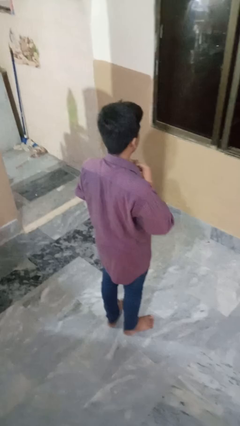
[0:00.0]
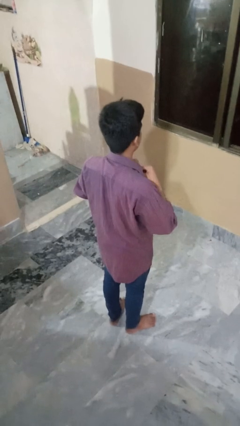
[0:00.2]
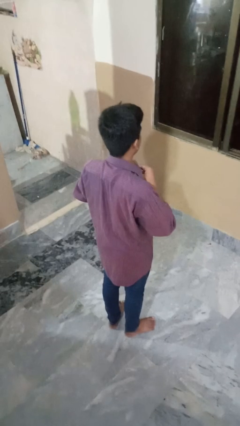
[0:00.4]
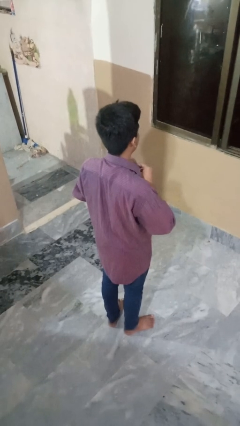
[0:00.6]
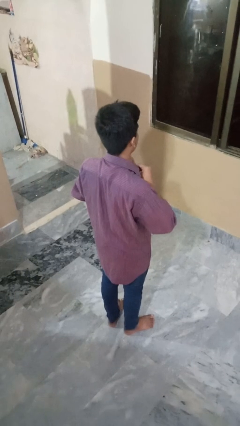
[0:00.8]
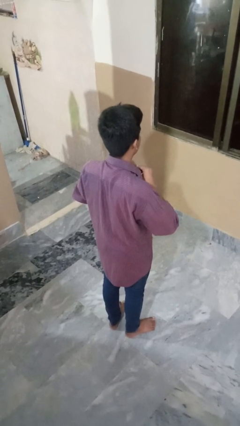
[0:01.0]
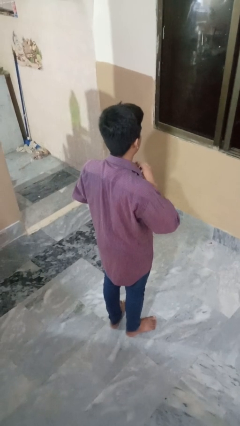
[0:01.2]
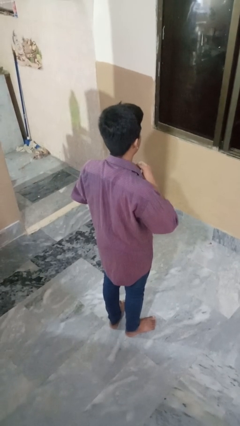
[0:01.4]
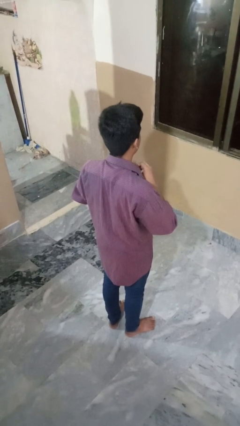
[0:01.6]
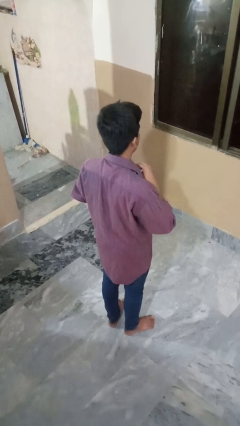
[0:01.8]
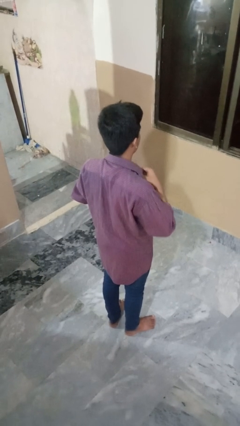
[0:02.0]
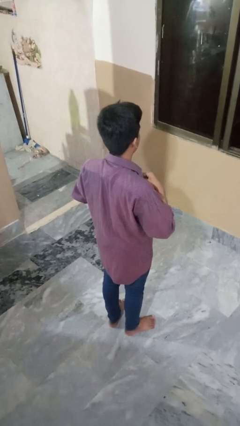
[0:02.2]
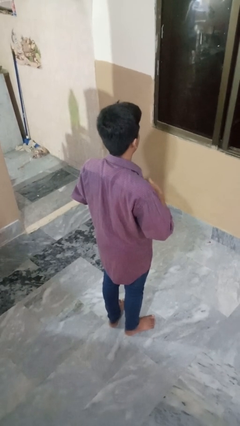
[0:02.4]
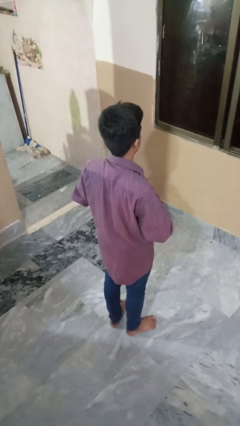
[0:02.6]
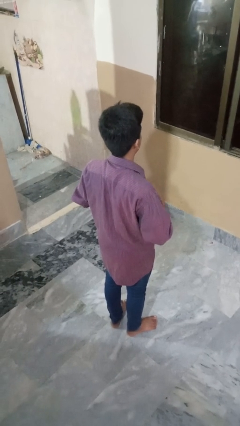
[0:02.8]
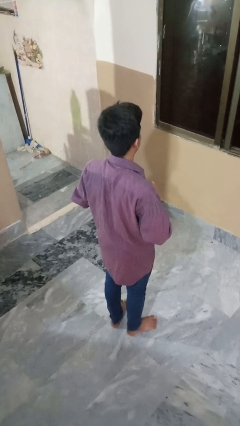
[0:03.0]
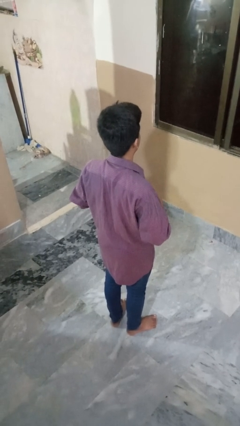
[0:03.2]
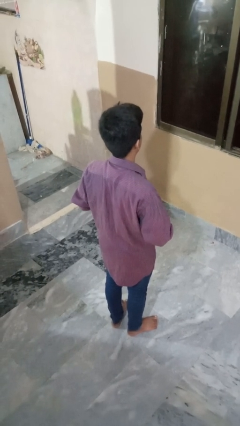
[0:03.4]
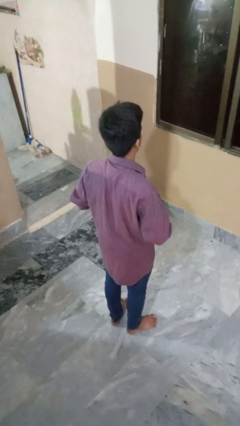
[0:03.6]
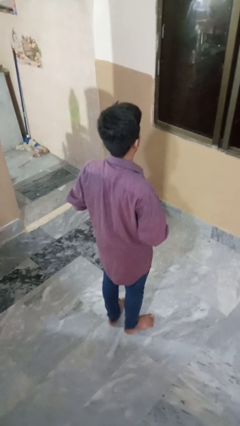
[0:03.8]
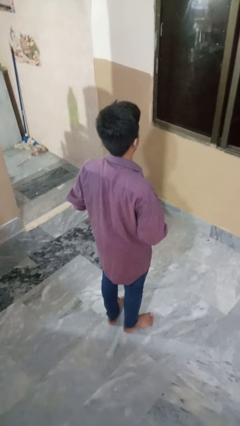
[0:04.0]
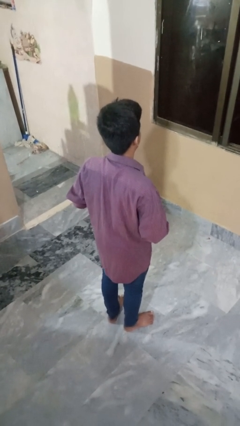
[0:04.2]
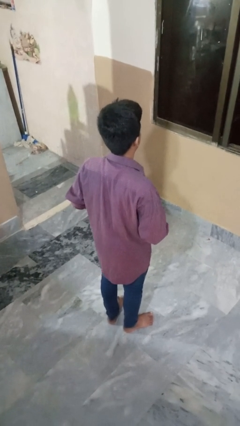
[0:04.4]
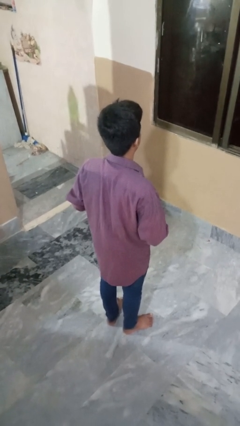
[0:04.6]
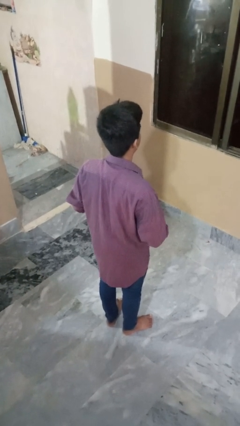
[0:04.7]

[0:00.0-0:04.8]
person unbuttons shirt

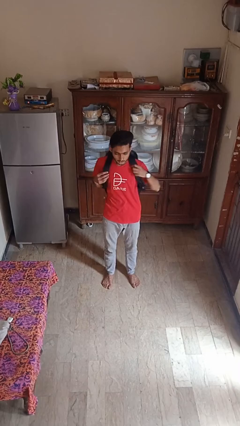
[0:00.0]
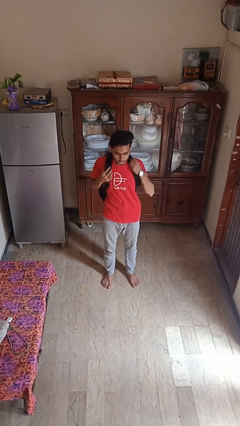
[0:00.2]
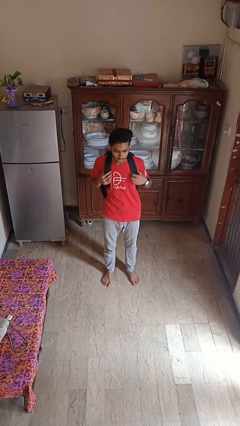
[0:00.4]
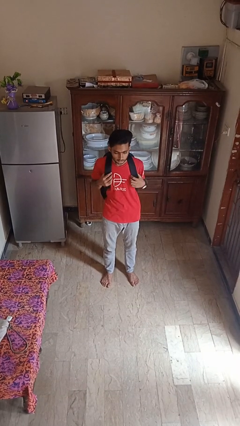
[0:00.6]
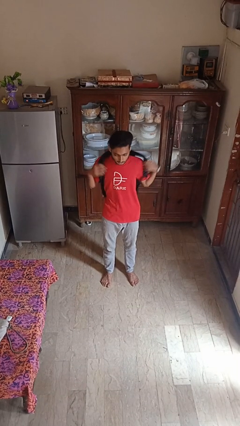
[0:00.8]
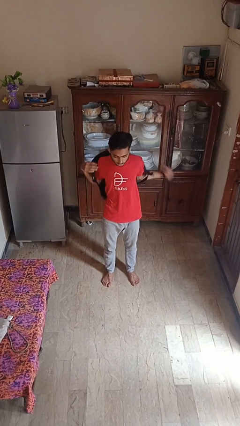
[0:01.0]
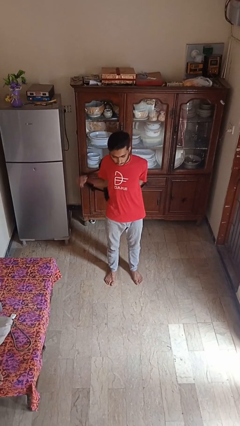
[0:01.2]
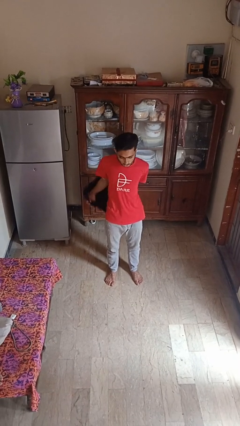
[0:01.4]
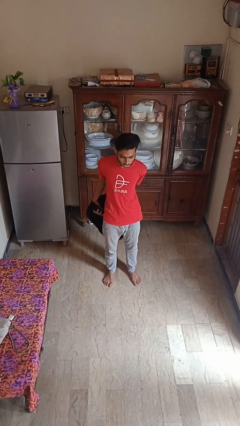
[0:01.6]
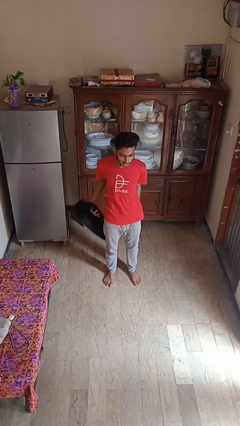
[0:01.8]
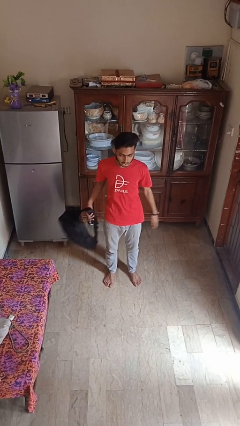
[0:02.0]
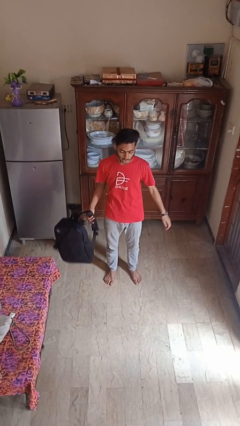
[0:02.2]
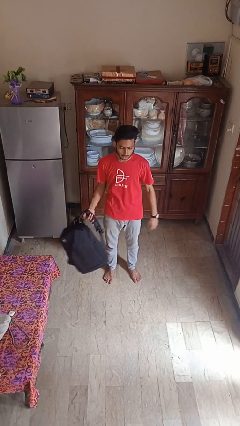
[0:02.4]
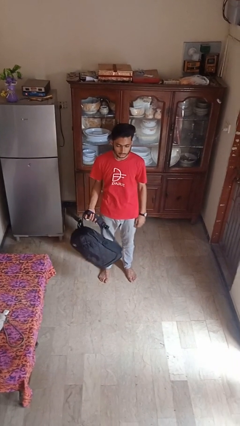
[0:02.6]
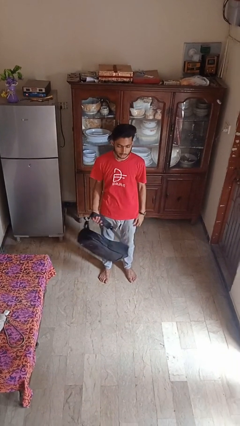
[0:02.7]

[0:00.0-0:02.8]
person takes off backpack

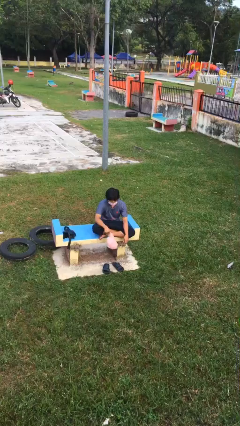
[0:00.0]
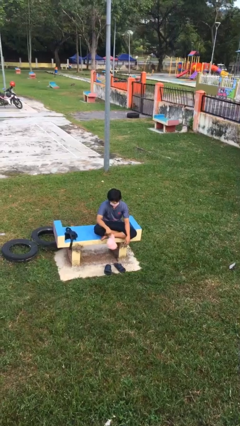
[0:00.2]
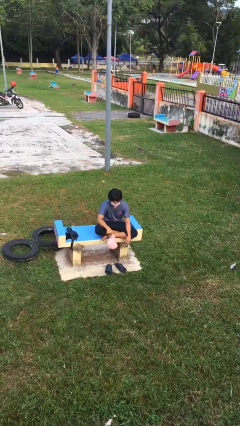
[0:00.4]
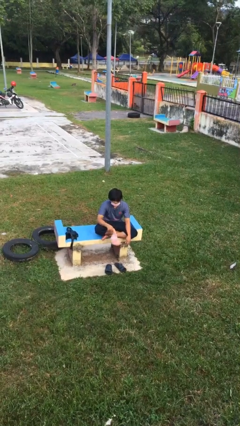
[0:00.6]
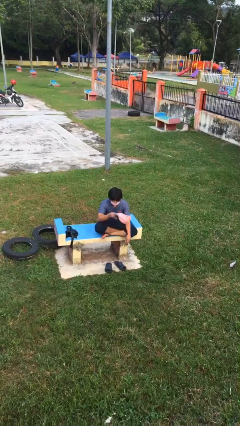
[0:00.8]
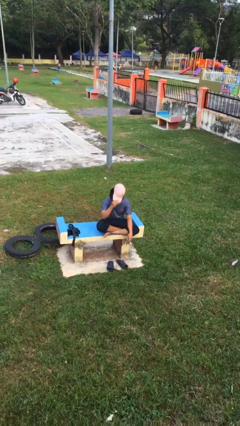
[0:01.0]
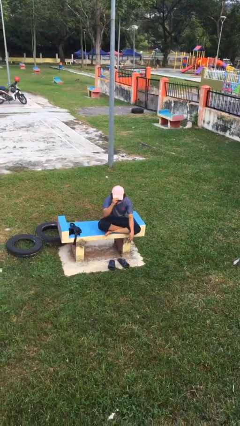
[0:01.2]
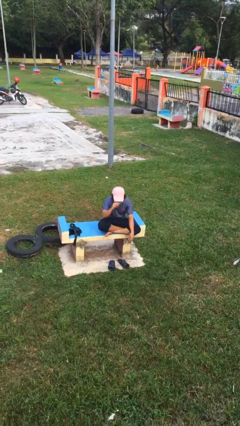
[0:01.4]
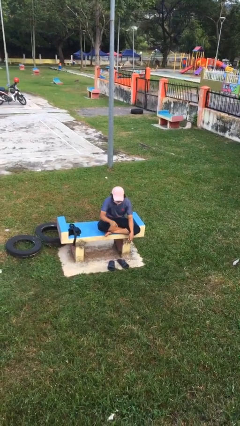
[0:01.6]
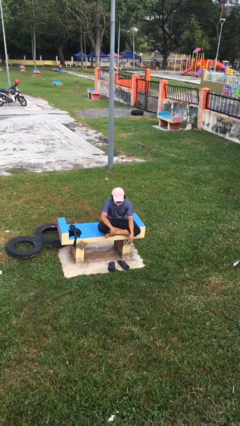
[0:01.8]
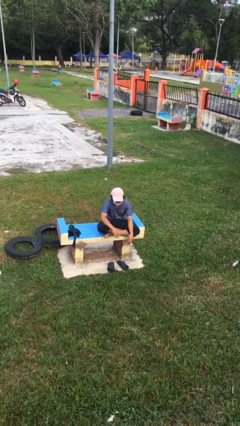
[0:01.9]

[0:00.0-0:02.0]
person puts on hat

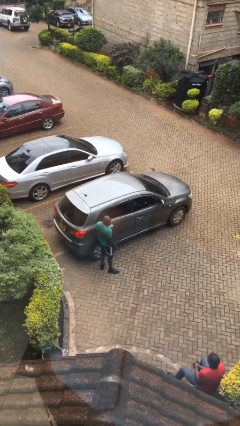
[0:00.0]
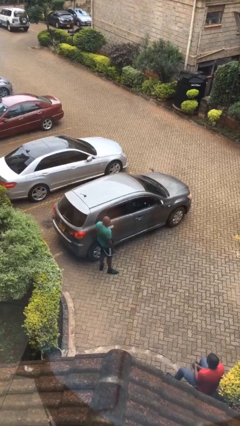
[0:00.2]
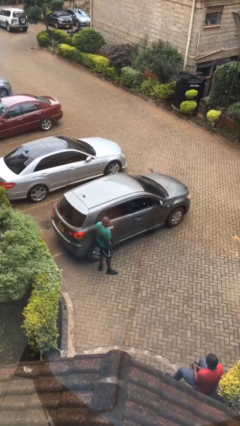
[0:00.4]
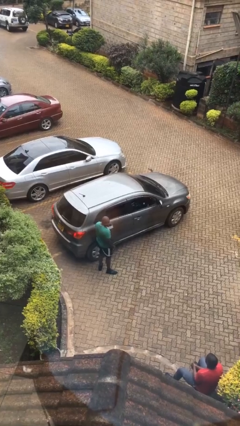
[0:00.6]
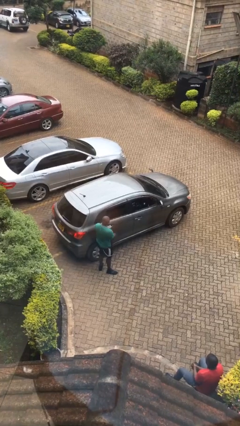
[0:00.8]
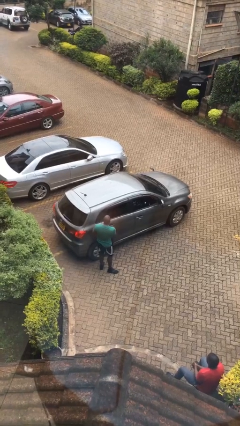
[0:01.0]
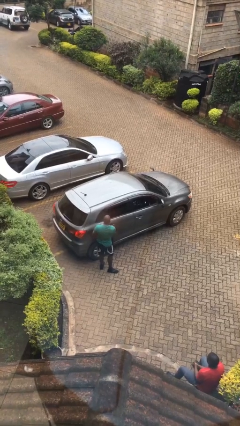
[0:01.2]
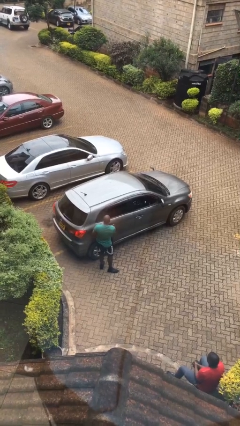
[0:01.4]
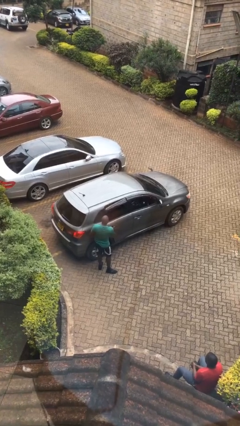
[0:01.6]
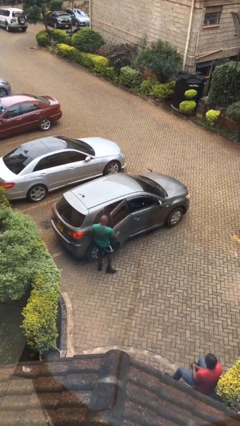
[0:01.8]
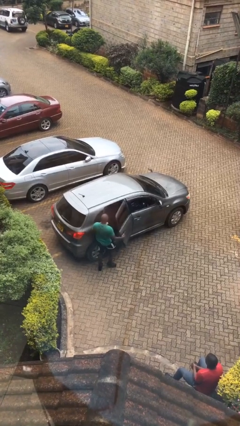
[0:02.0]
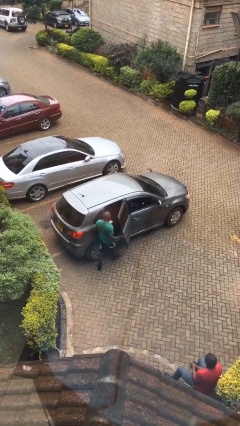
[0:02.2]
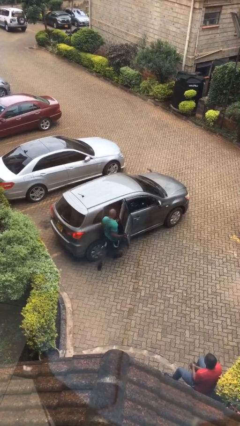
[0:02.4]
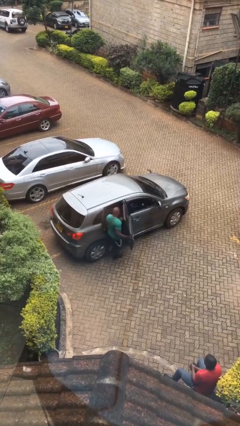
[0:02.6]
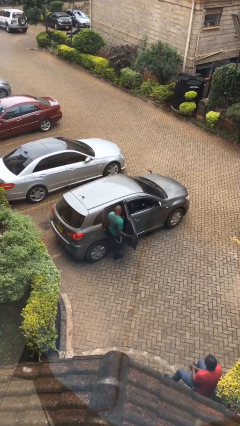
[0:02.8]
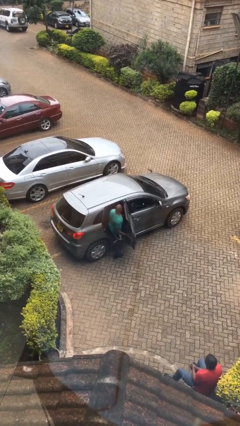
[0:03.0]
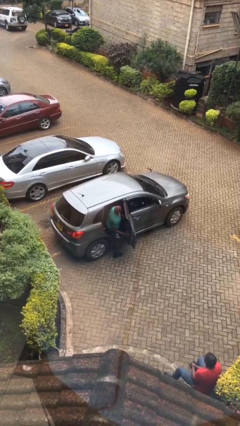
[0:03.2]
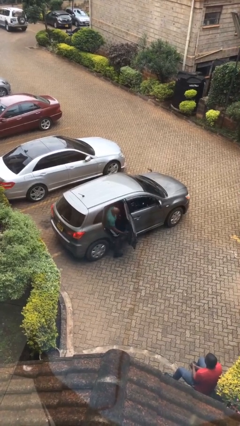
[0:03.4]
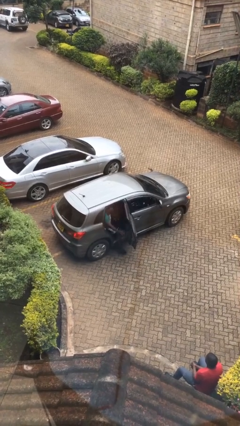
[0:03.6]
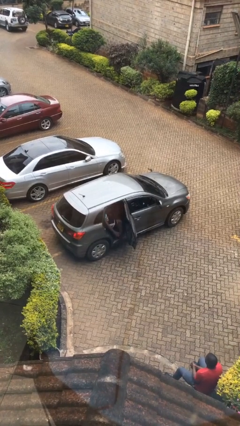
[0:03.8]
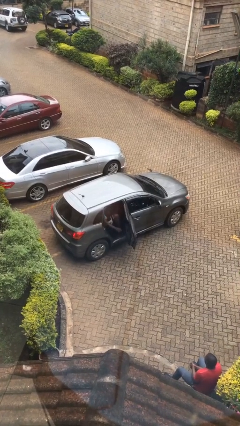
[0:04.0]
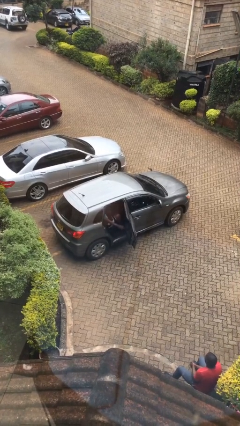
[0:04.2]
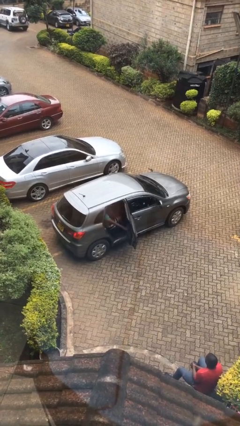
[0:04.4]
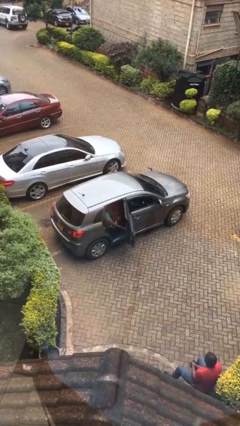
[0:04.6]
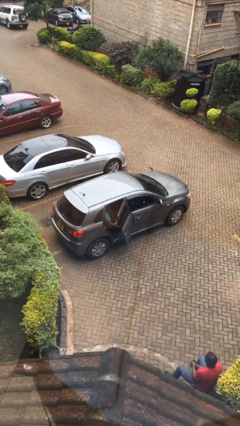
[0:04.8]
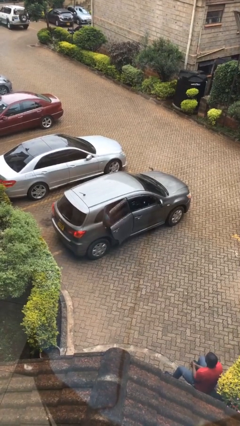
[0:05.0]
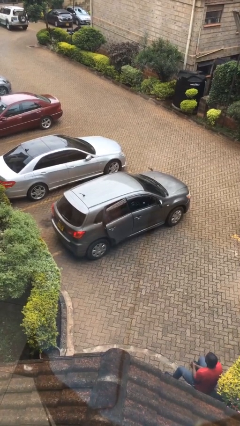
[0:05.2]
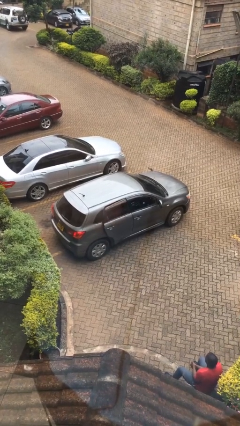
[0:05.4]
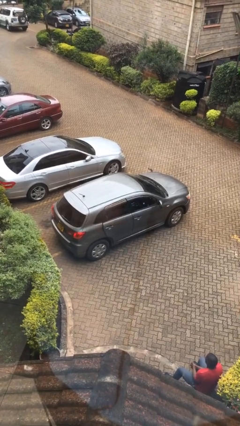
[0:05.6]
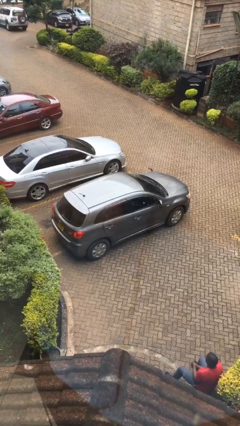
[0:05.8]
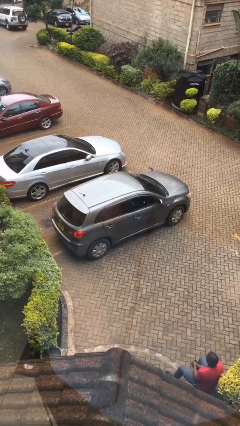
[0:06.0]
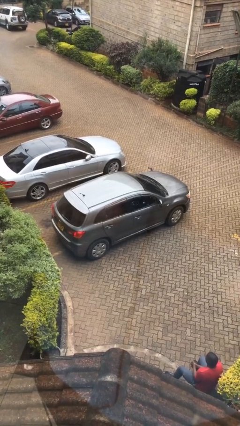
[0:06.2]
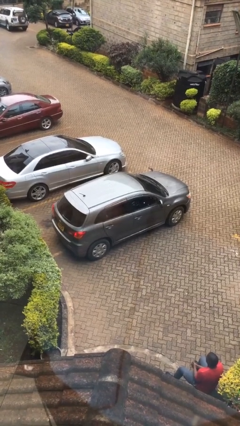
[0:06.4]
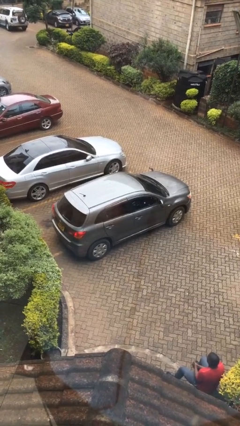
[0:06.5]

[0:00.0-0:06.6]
car picks up person

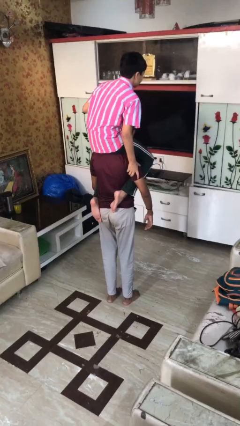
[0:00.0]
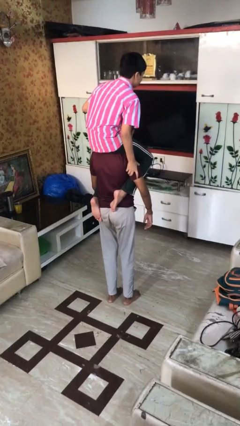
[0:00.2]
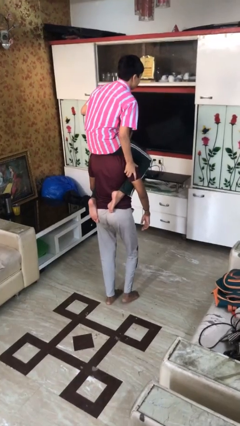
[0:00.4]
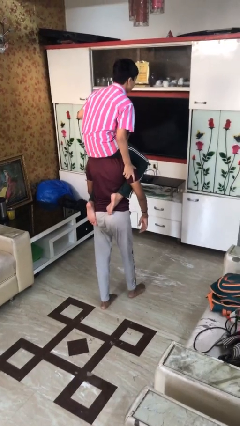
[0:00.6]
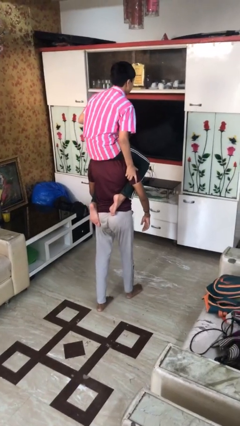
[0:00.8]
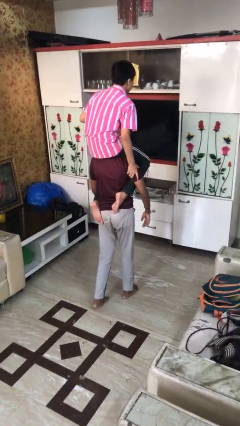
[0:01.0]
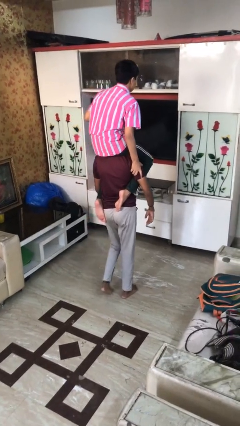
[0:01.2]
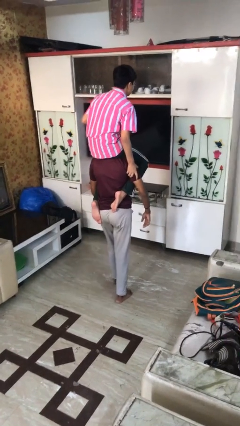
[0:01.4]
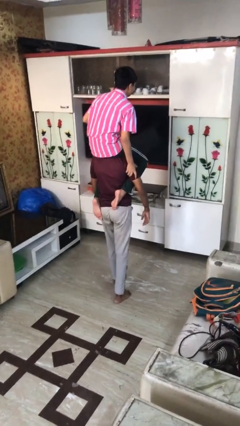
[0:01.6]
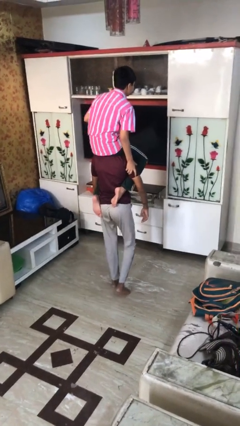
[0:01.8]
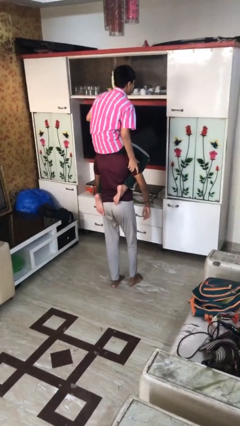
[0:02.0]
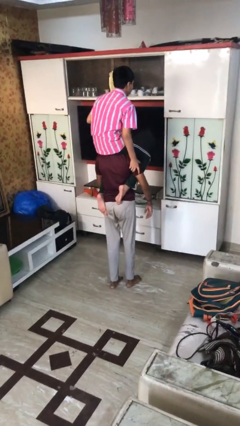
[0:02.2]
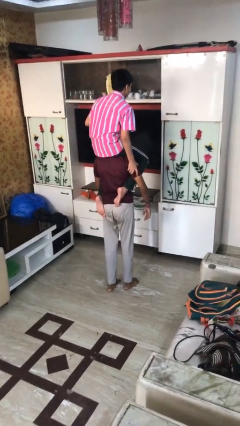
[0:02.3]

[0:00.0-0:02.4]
person carries person on shoulders
